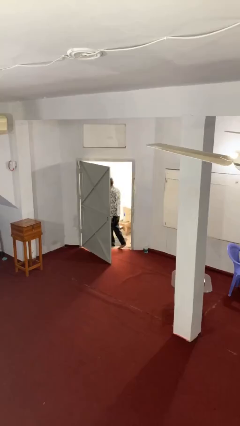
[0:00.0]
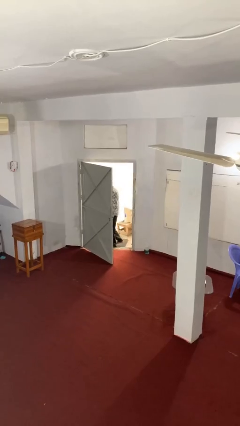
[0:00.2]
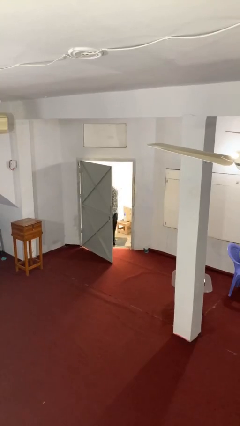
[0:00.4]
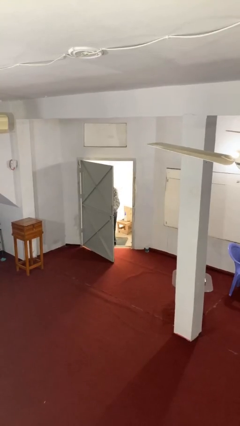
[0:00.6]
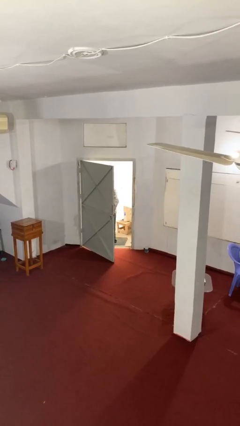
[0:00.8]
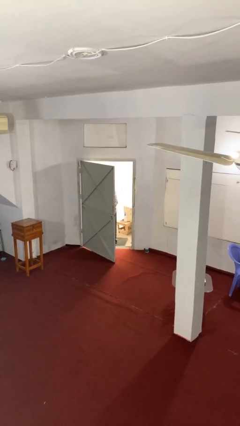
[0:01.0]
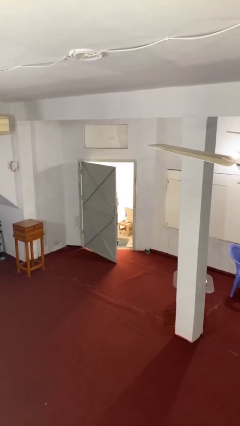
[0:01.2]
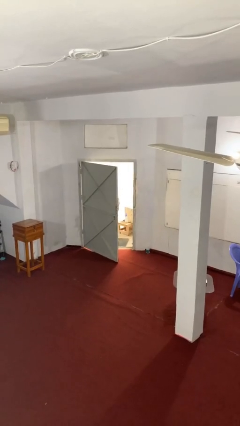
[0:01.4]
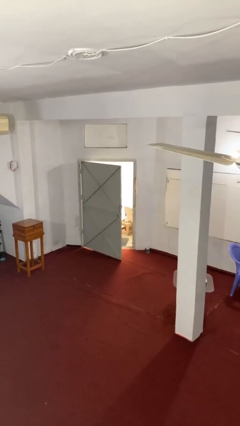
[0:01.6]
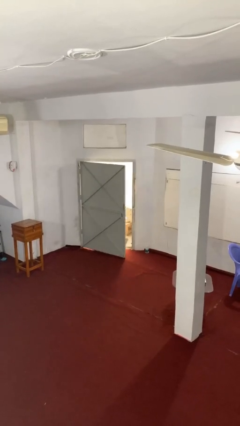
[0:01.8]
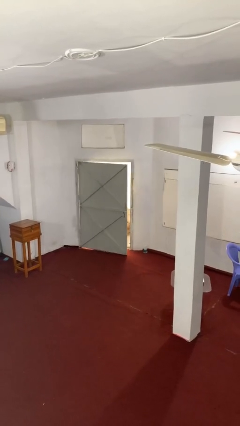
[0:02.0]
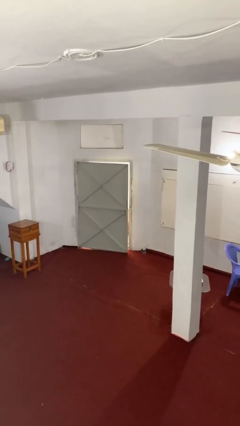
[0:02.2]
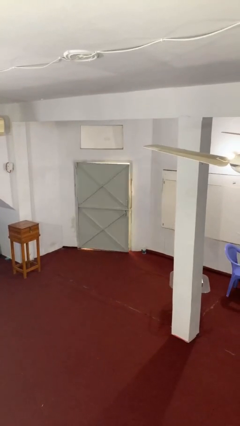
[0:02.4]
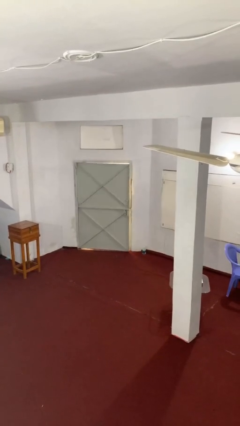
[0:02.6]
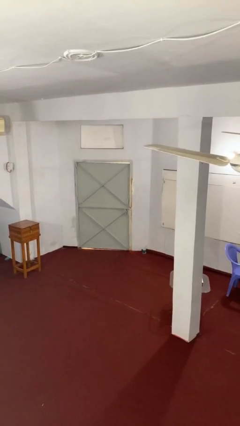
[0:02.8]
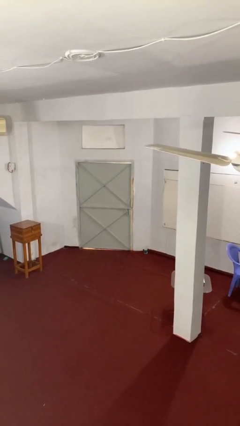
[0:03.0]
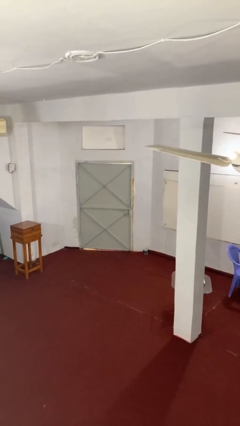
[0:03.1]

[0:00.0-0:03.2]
person closes facility door

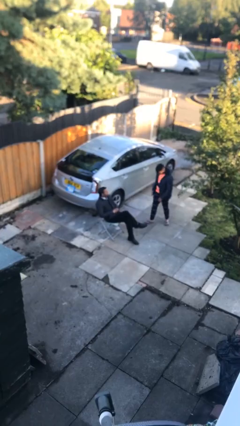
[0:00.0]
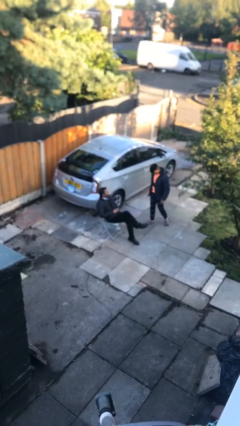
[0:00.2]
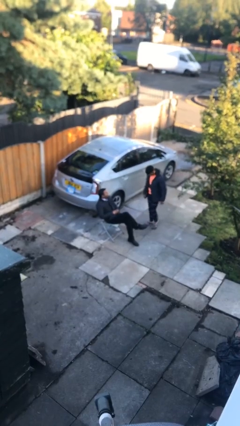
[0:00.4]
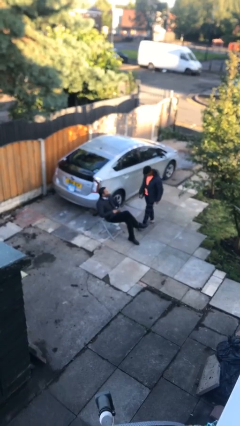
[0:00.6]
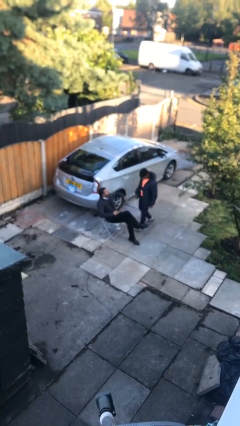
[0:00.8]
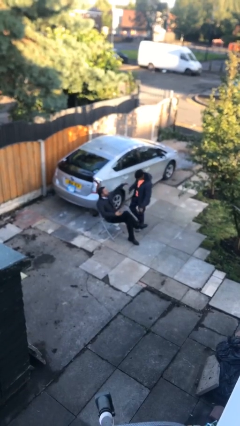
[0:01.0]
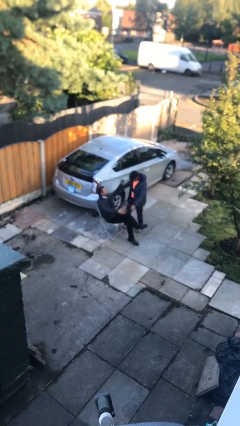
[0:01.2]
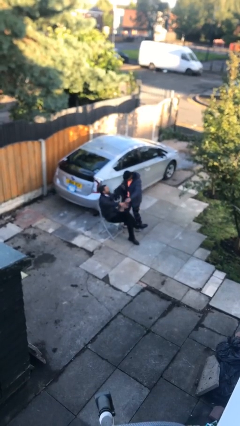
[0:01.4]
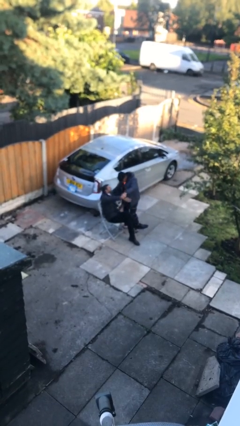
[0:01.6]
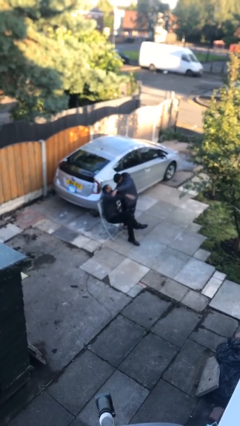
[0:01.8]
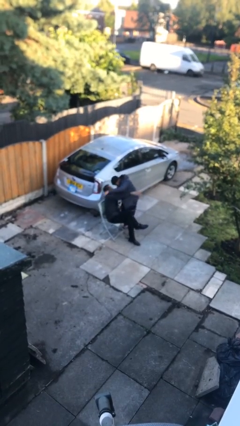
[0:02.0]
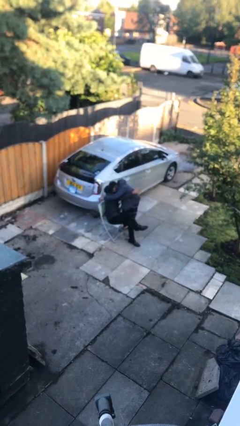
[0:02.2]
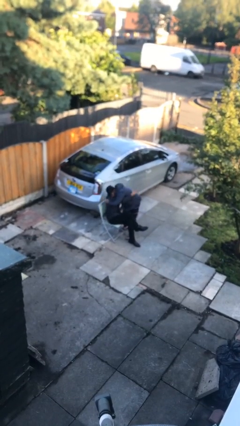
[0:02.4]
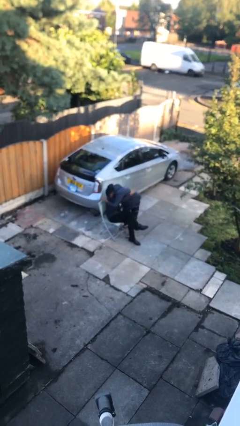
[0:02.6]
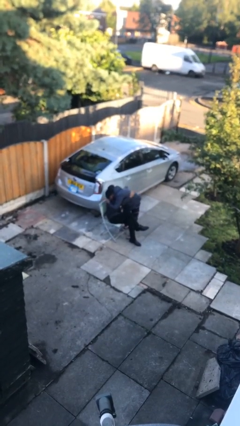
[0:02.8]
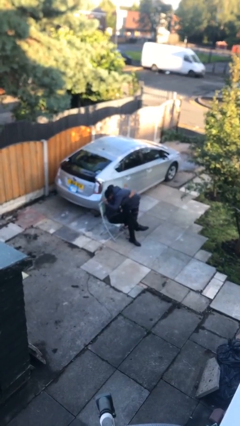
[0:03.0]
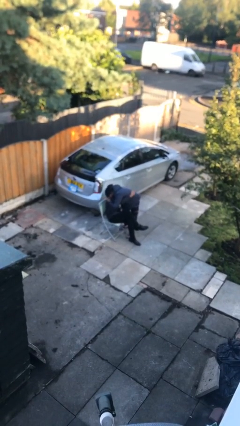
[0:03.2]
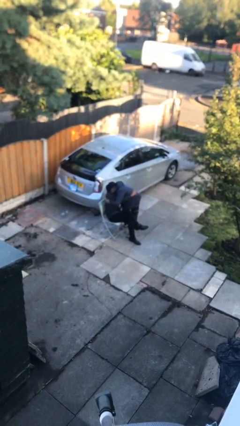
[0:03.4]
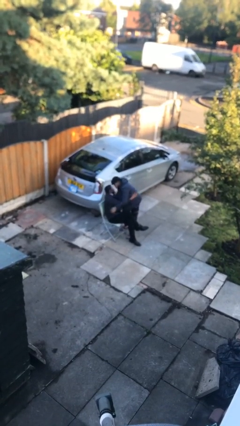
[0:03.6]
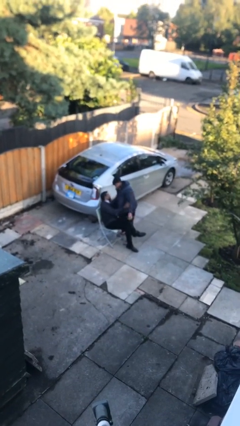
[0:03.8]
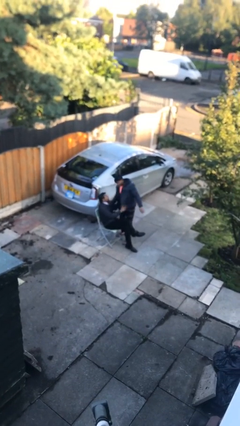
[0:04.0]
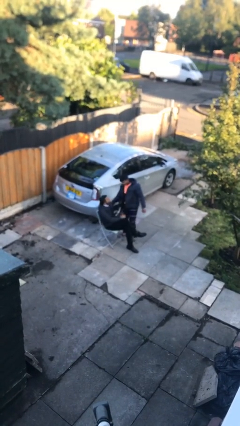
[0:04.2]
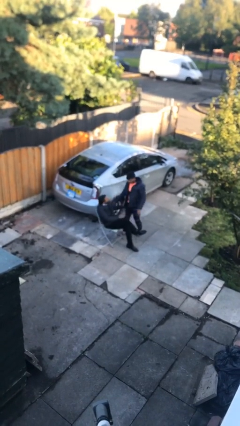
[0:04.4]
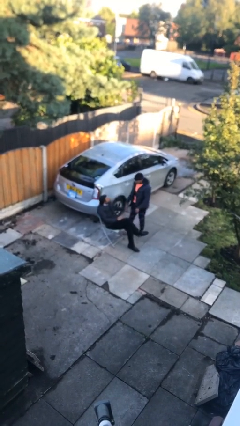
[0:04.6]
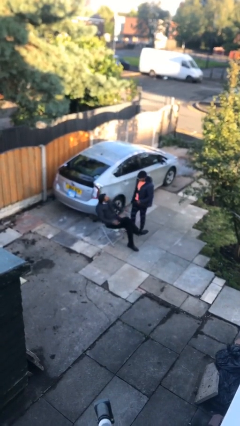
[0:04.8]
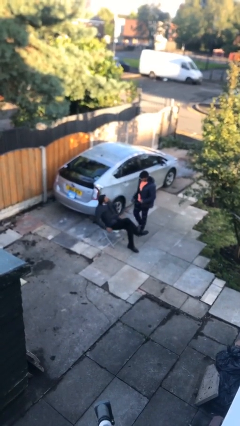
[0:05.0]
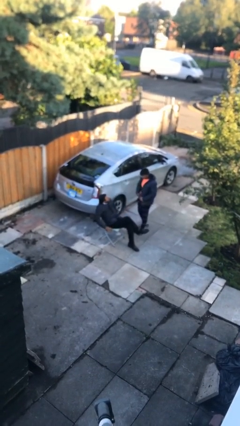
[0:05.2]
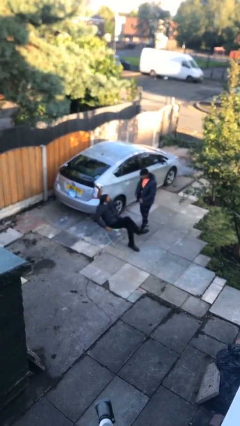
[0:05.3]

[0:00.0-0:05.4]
person embraces person

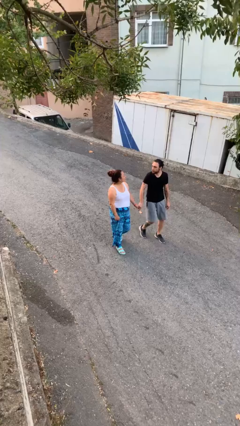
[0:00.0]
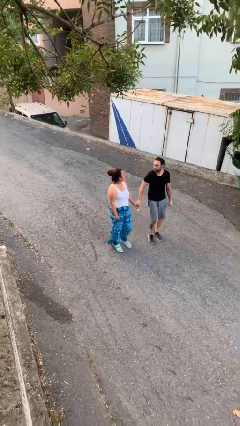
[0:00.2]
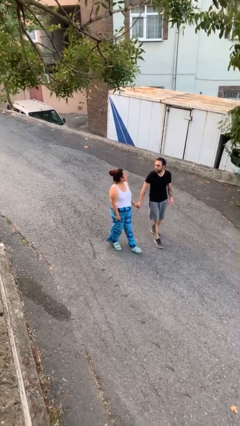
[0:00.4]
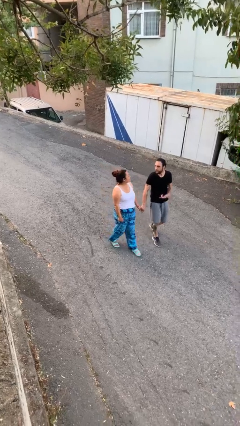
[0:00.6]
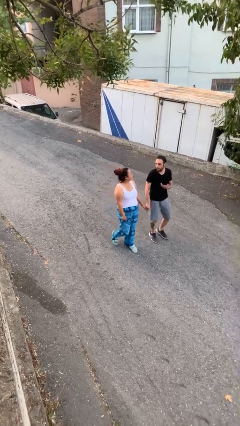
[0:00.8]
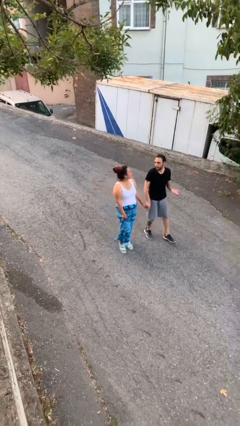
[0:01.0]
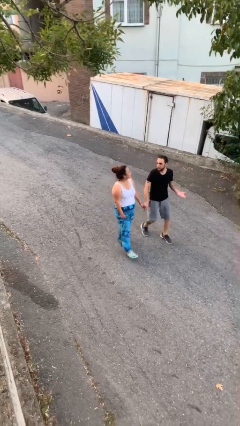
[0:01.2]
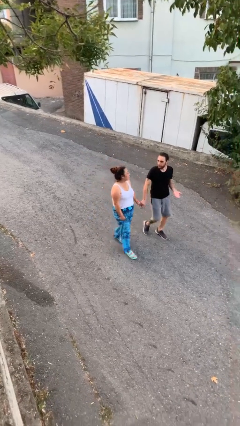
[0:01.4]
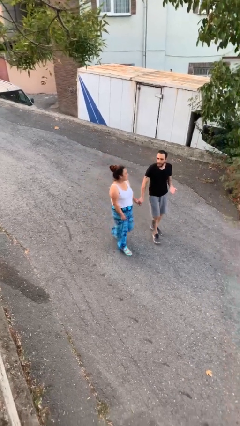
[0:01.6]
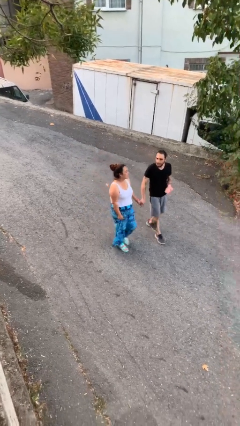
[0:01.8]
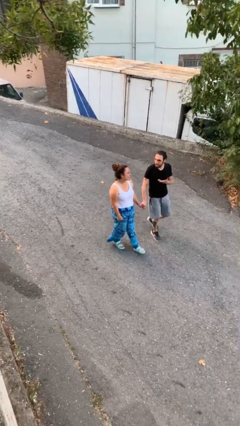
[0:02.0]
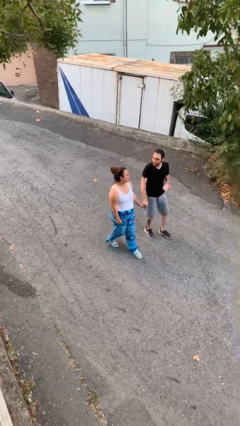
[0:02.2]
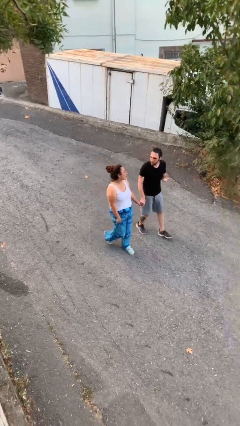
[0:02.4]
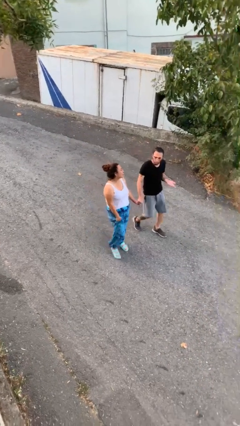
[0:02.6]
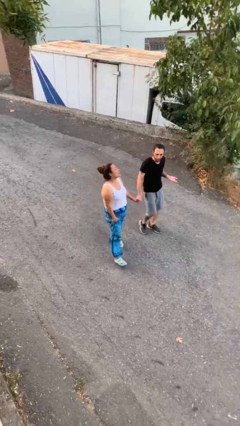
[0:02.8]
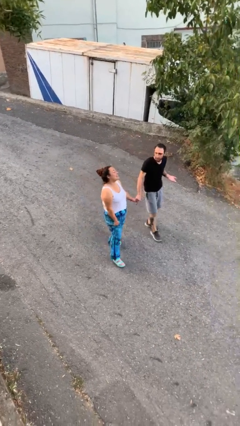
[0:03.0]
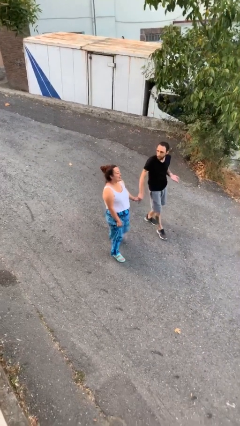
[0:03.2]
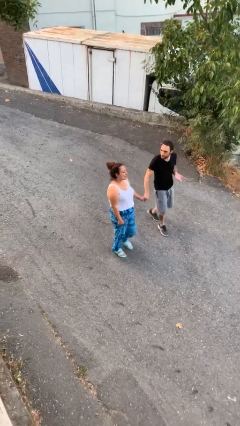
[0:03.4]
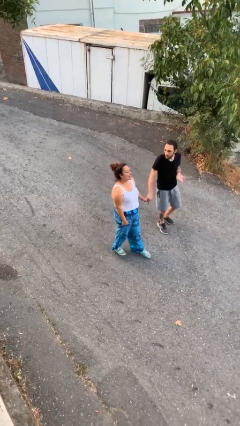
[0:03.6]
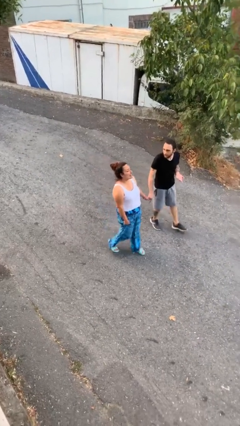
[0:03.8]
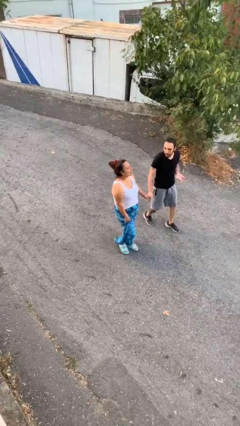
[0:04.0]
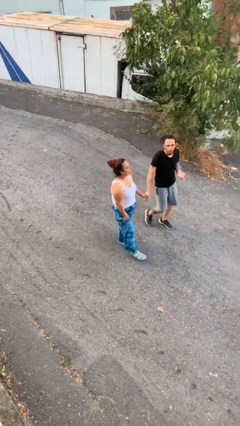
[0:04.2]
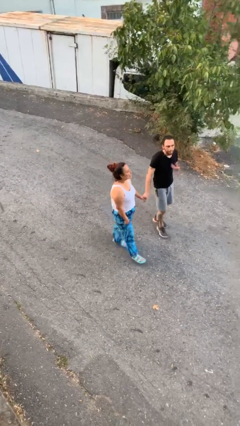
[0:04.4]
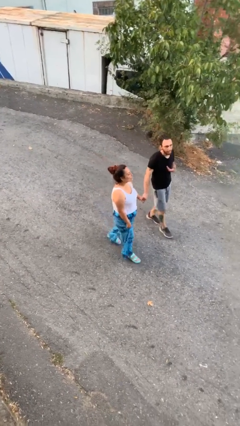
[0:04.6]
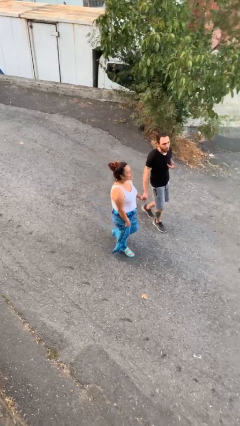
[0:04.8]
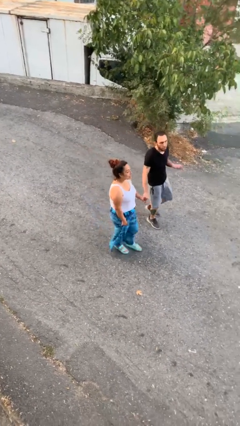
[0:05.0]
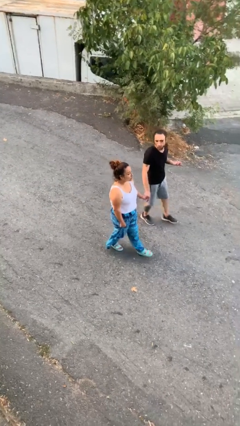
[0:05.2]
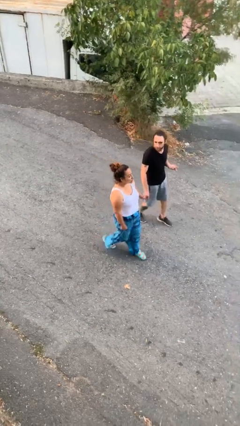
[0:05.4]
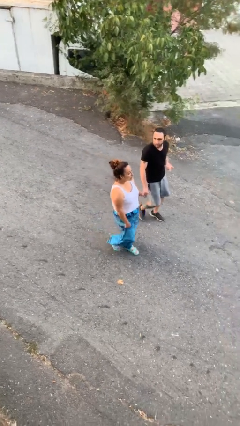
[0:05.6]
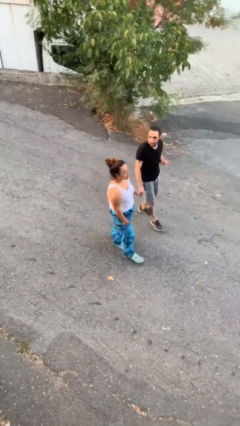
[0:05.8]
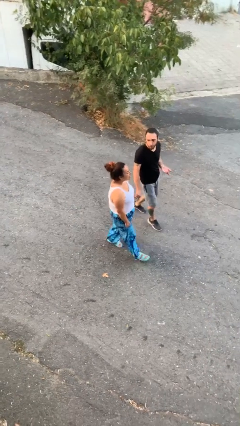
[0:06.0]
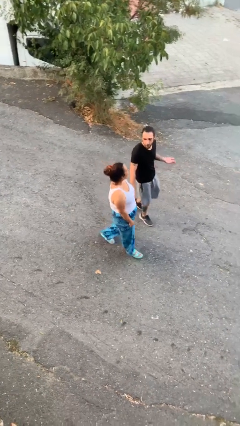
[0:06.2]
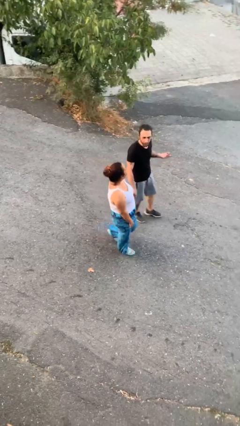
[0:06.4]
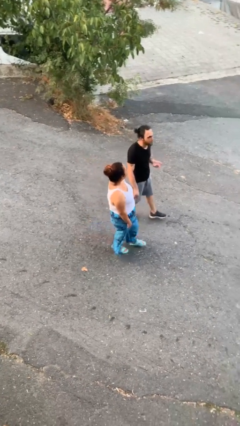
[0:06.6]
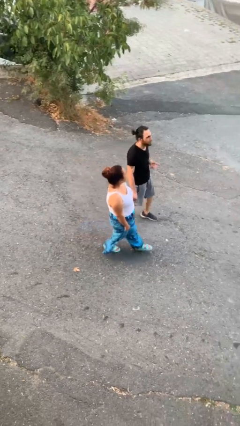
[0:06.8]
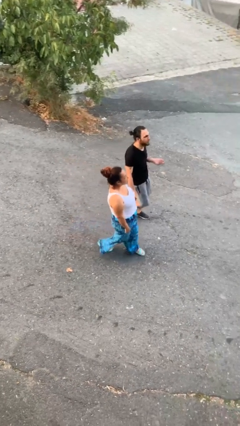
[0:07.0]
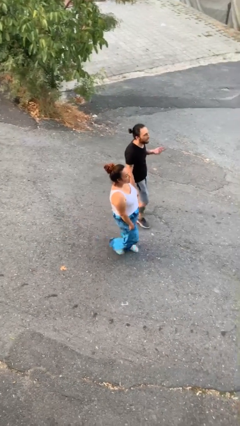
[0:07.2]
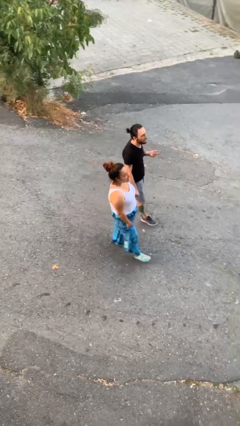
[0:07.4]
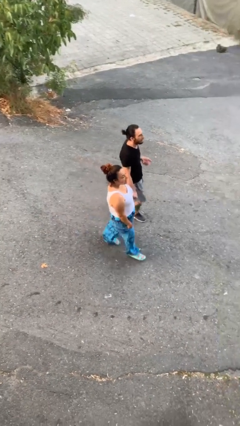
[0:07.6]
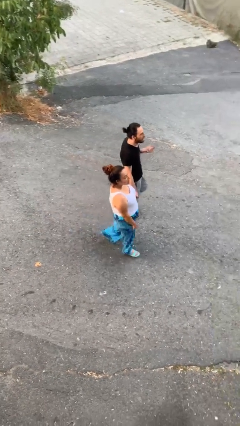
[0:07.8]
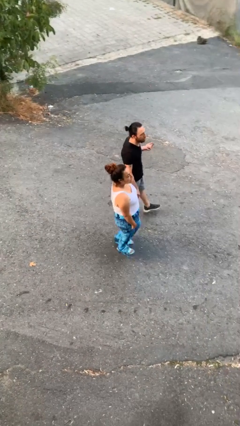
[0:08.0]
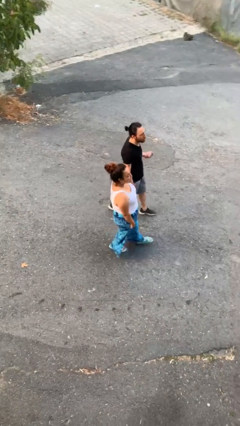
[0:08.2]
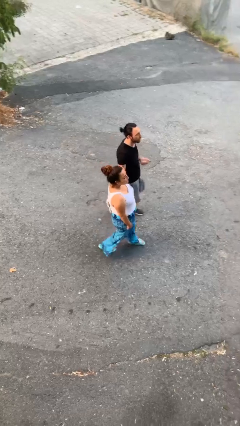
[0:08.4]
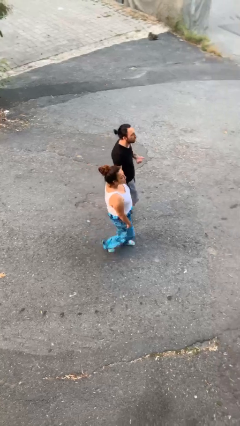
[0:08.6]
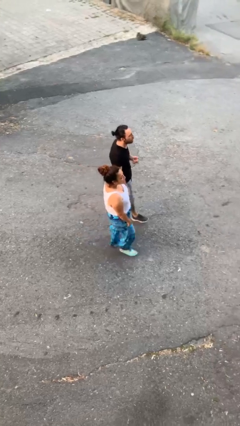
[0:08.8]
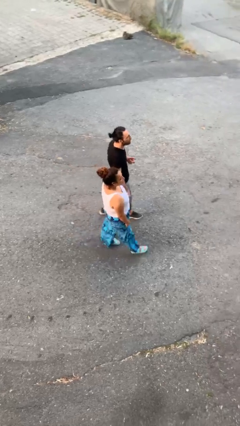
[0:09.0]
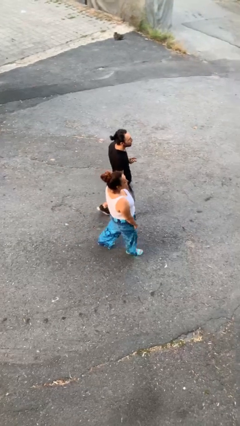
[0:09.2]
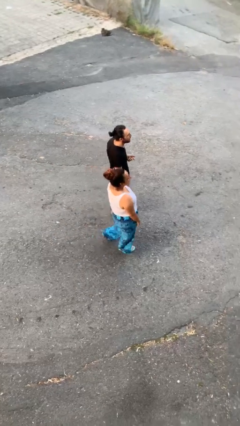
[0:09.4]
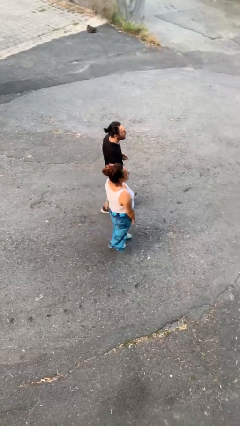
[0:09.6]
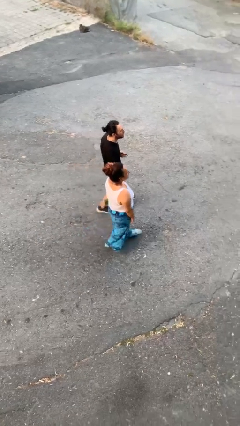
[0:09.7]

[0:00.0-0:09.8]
person holds hand
